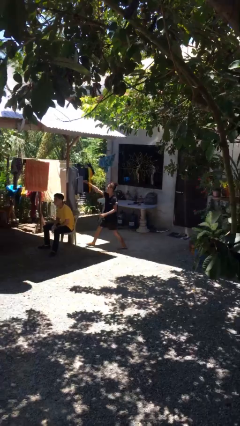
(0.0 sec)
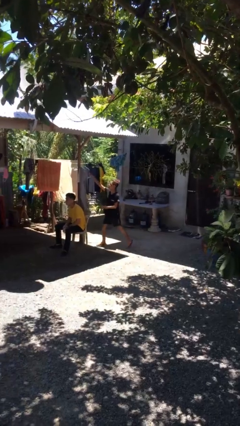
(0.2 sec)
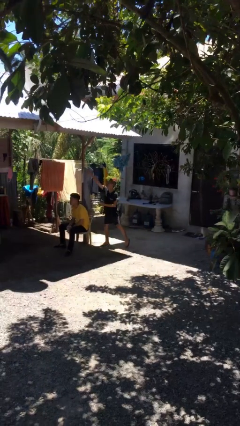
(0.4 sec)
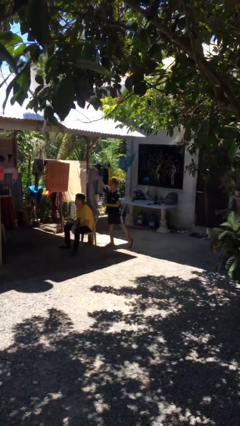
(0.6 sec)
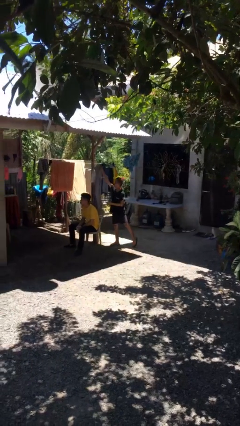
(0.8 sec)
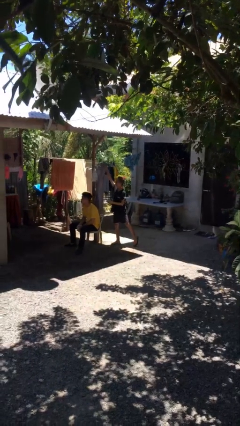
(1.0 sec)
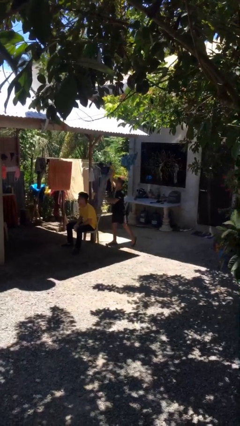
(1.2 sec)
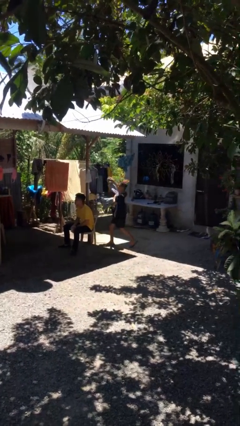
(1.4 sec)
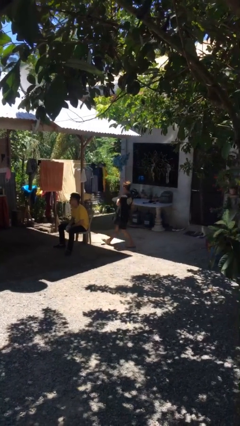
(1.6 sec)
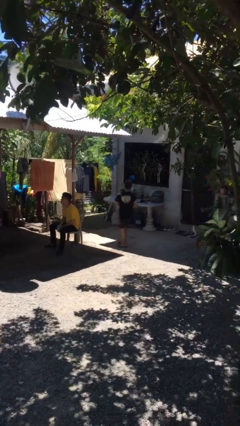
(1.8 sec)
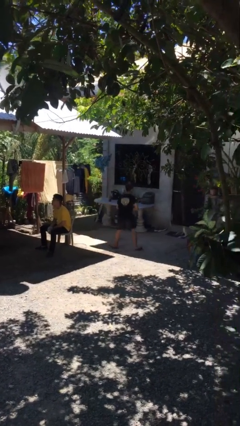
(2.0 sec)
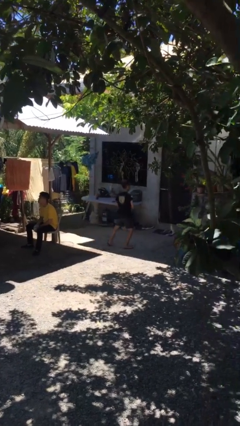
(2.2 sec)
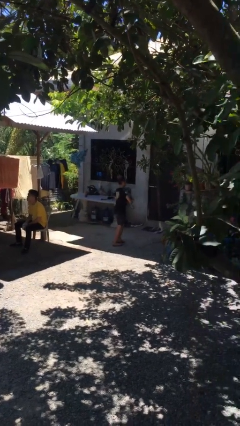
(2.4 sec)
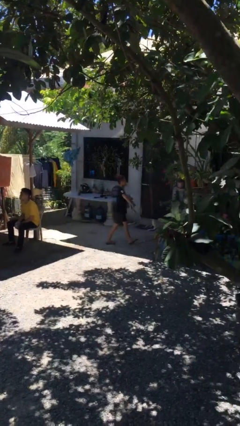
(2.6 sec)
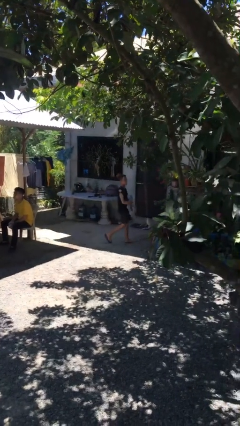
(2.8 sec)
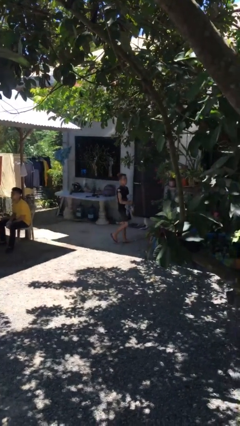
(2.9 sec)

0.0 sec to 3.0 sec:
person steals object from person

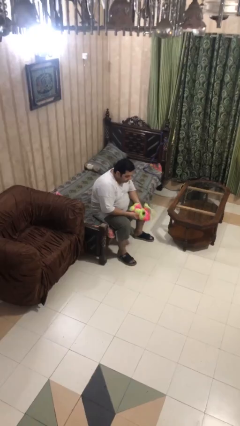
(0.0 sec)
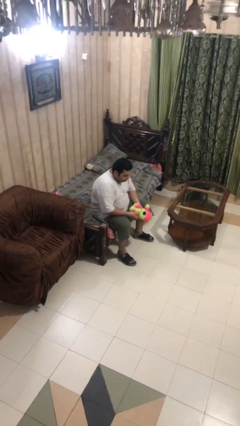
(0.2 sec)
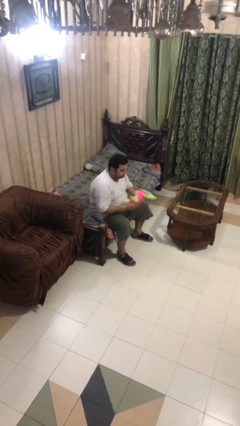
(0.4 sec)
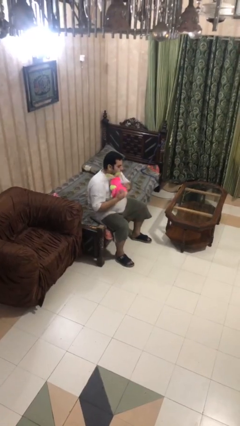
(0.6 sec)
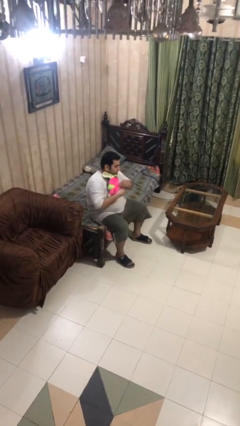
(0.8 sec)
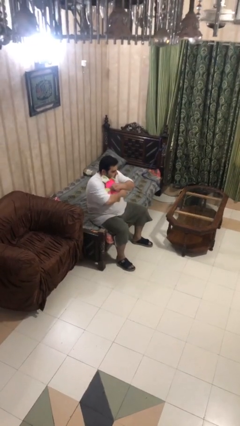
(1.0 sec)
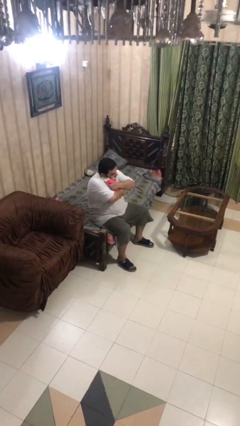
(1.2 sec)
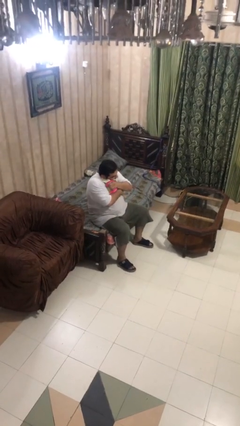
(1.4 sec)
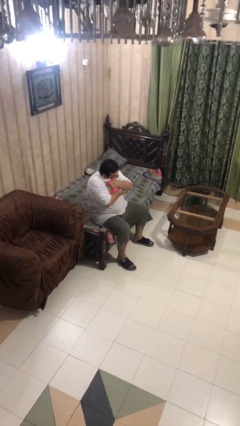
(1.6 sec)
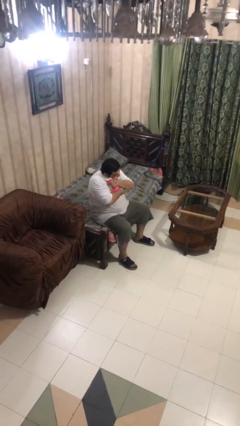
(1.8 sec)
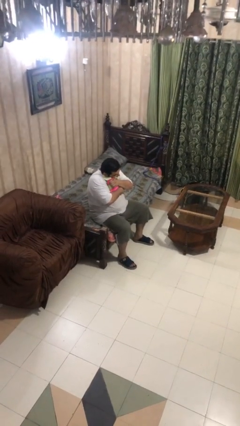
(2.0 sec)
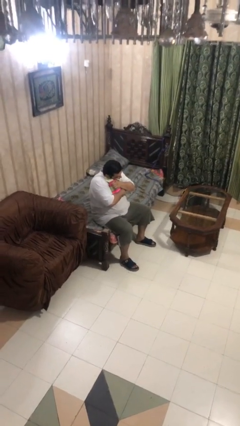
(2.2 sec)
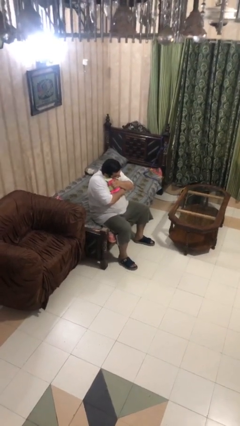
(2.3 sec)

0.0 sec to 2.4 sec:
person hugs stuffed animal

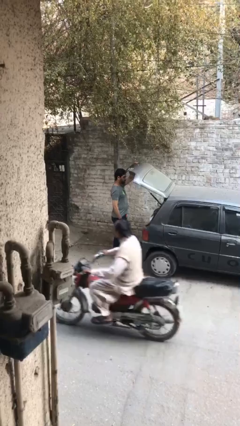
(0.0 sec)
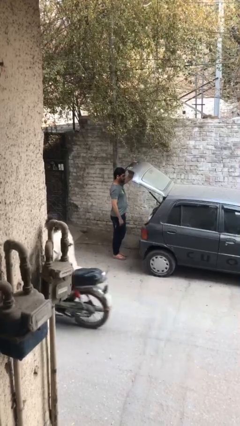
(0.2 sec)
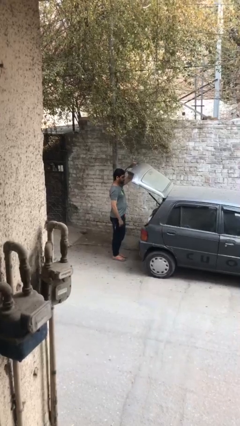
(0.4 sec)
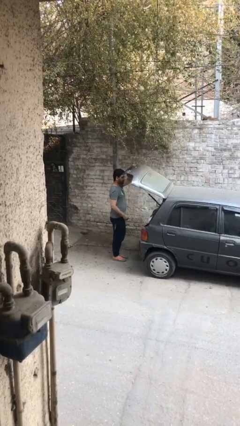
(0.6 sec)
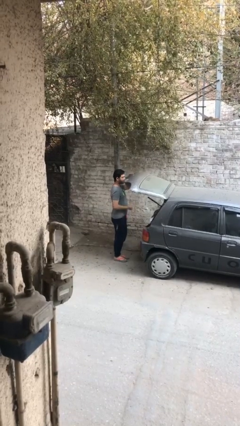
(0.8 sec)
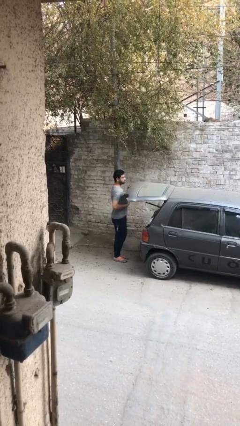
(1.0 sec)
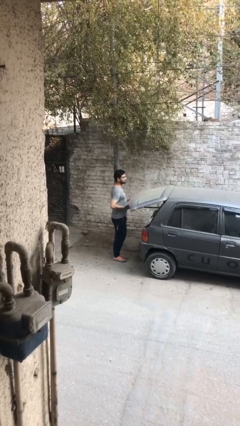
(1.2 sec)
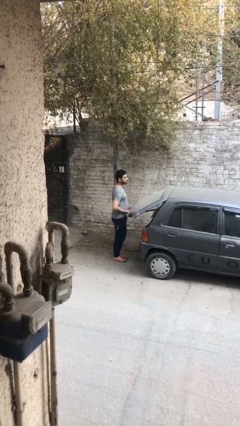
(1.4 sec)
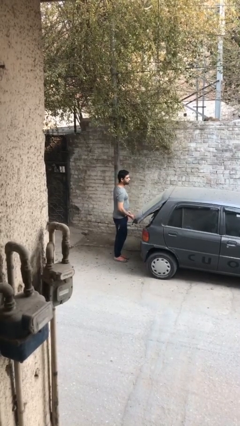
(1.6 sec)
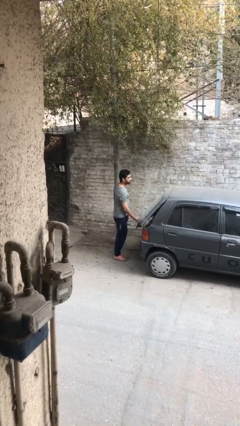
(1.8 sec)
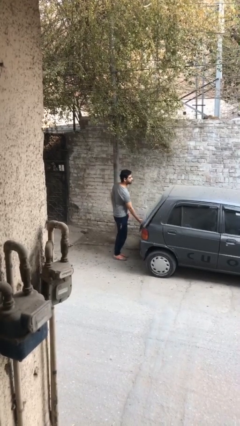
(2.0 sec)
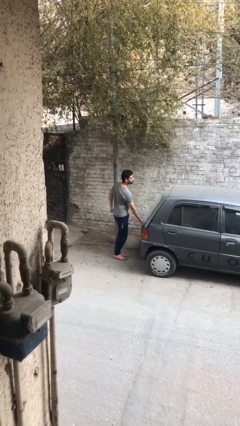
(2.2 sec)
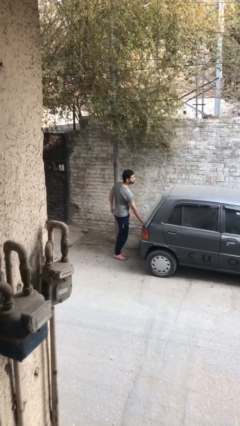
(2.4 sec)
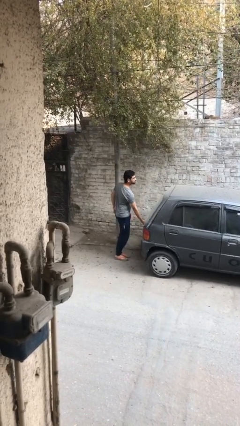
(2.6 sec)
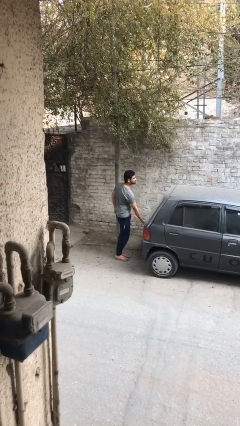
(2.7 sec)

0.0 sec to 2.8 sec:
person closes car trunk

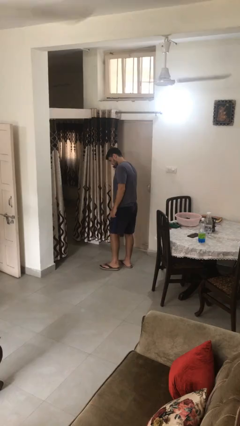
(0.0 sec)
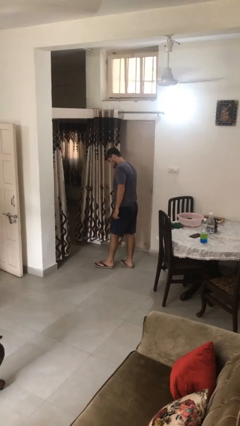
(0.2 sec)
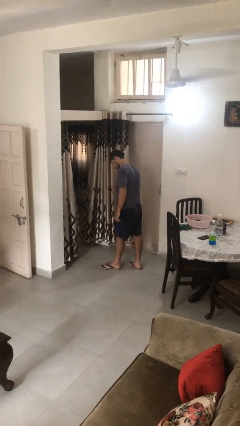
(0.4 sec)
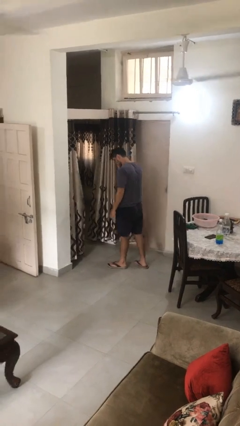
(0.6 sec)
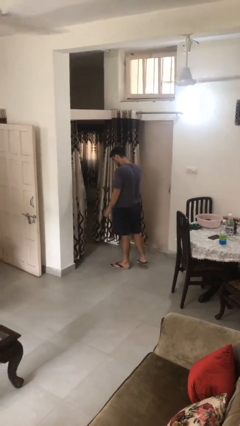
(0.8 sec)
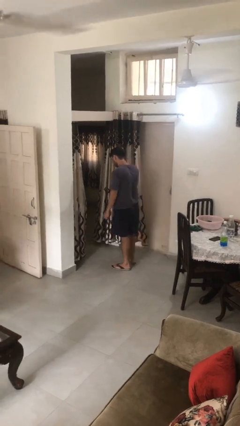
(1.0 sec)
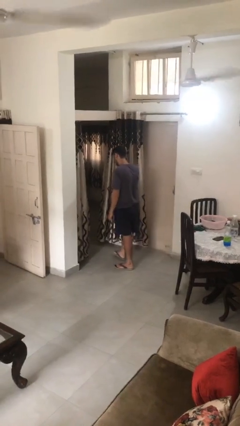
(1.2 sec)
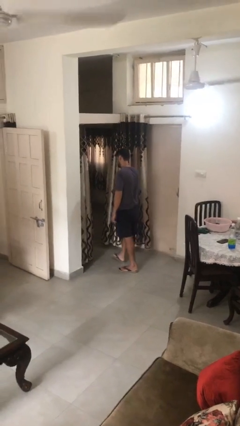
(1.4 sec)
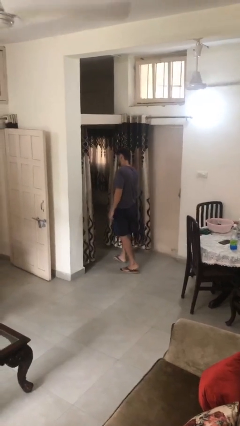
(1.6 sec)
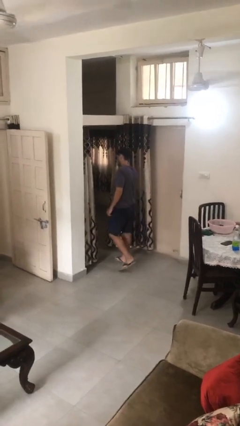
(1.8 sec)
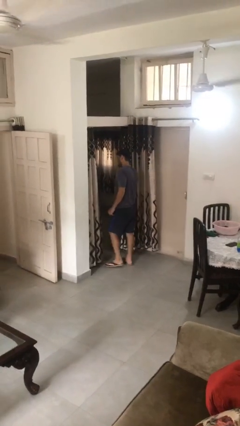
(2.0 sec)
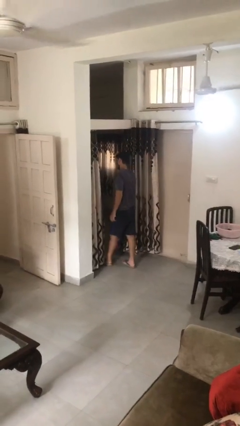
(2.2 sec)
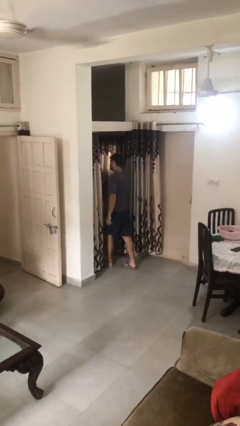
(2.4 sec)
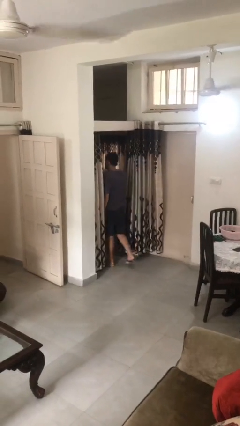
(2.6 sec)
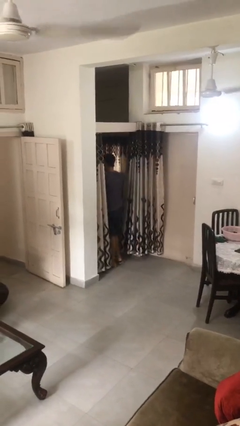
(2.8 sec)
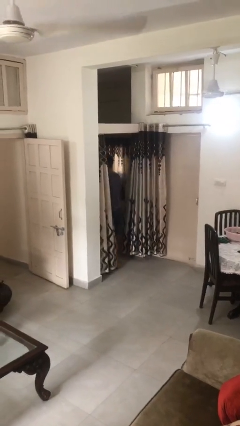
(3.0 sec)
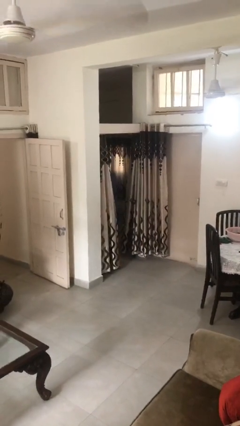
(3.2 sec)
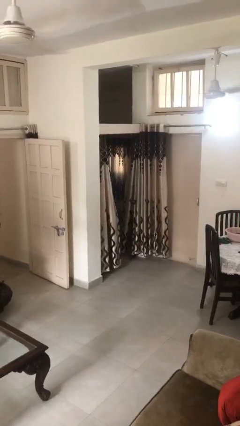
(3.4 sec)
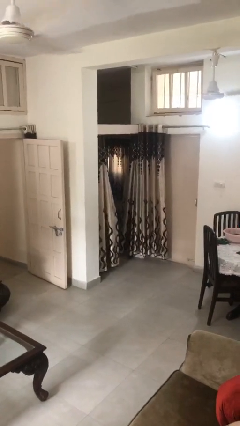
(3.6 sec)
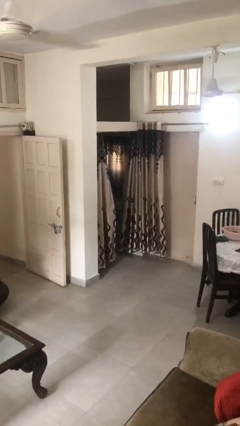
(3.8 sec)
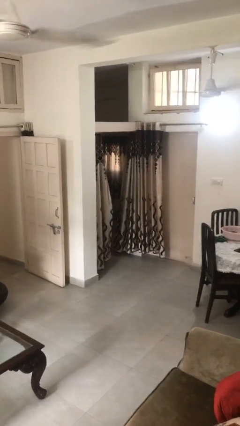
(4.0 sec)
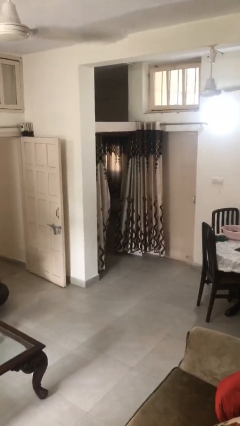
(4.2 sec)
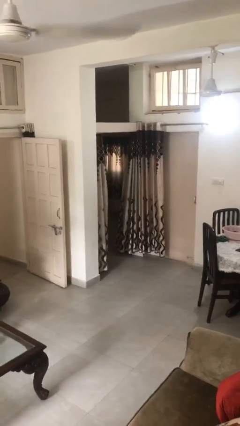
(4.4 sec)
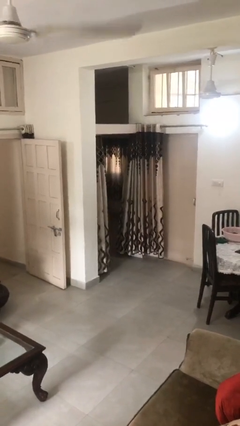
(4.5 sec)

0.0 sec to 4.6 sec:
person exits scene through structure

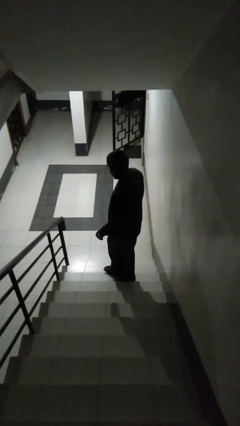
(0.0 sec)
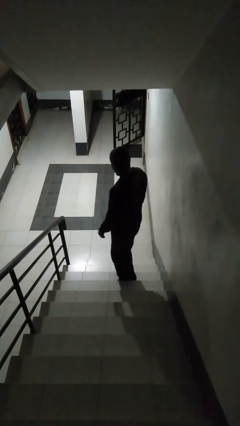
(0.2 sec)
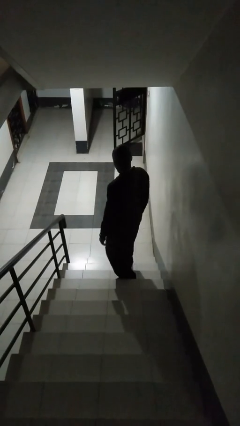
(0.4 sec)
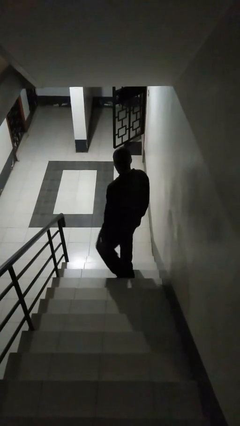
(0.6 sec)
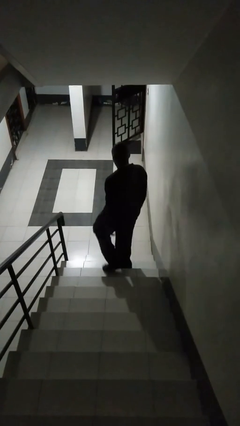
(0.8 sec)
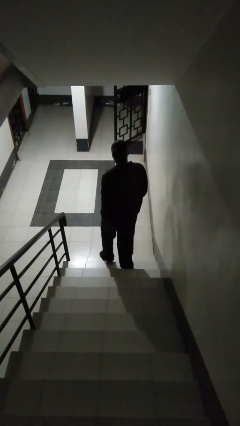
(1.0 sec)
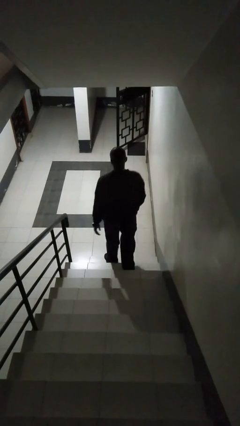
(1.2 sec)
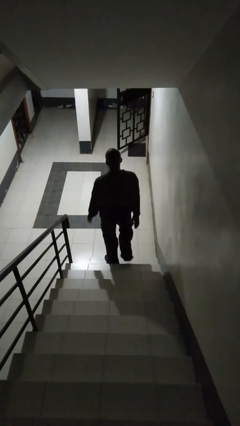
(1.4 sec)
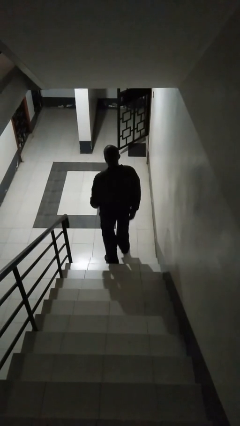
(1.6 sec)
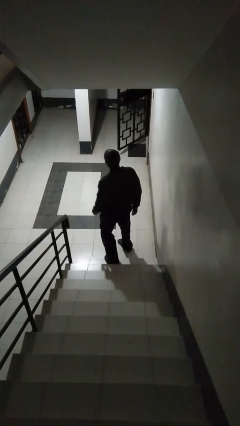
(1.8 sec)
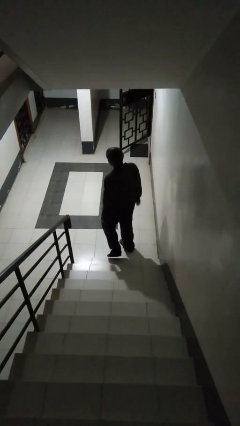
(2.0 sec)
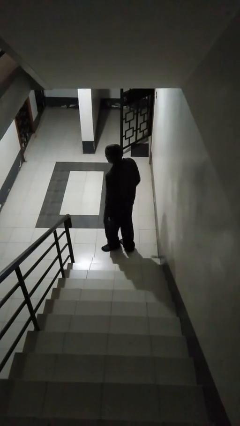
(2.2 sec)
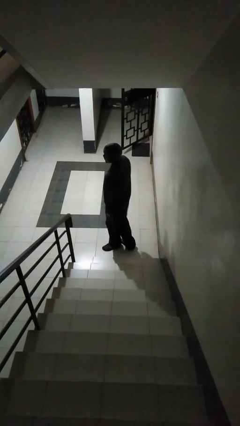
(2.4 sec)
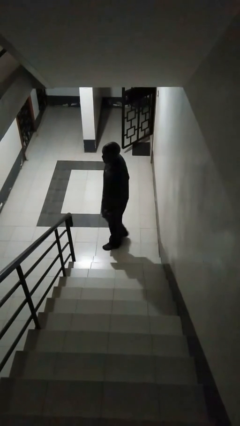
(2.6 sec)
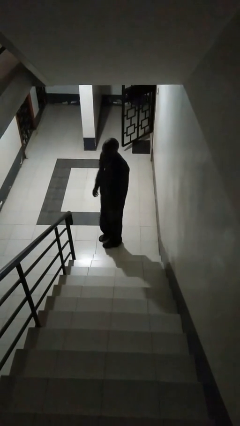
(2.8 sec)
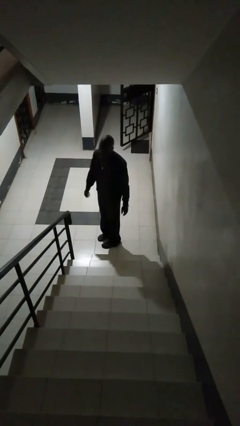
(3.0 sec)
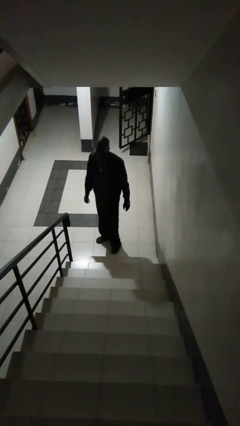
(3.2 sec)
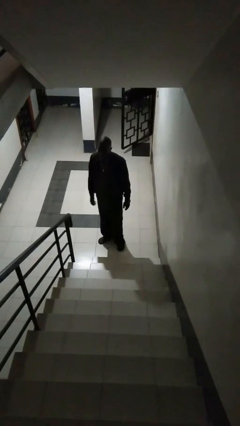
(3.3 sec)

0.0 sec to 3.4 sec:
person climbs down stairs

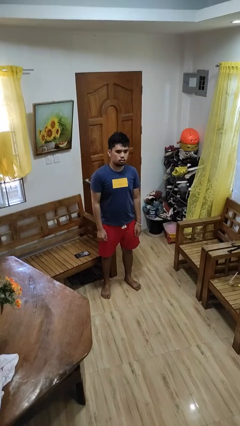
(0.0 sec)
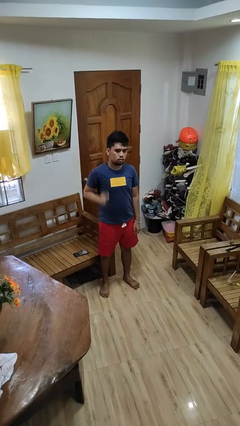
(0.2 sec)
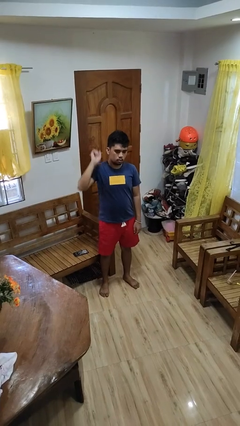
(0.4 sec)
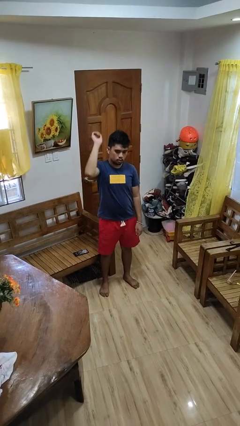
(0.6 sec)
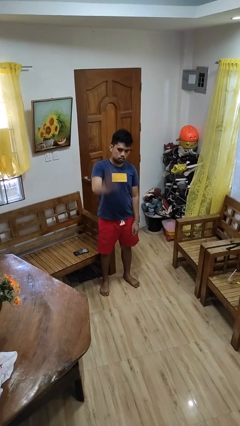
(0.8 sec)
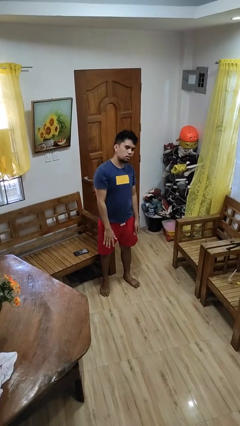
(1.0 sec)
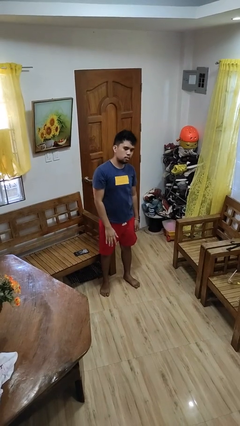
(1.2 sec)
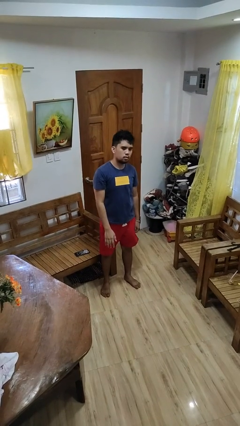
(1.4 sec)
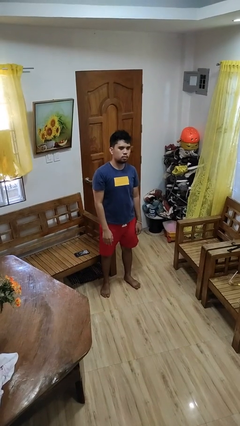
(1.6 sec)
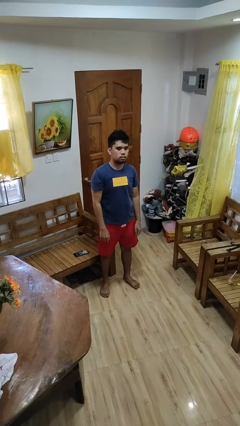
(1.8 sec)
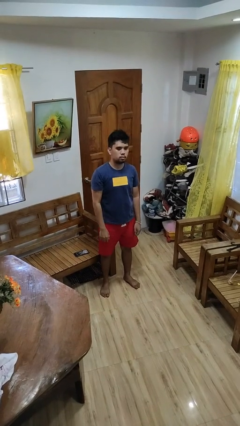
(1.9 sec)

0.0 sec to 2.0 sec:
person gestures swipe down
